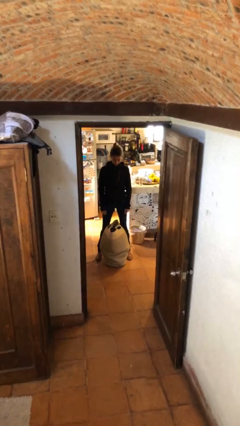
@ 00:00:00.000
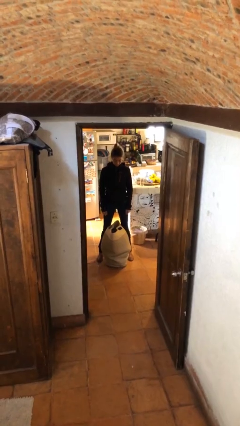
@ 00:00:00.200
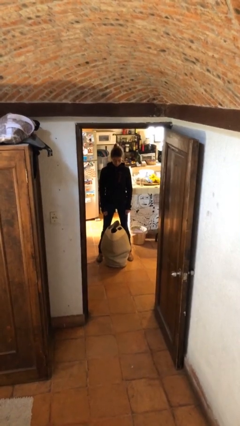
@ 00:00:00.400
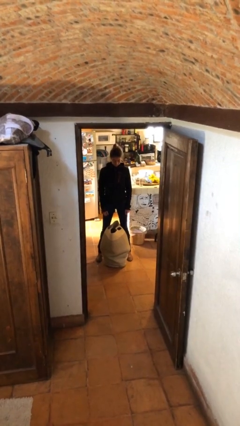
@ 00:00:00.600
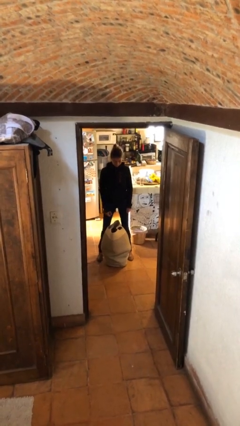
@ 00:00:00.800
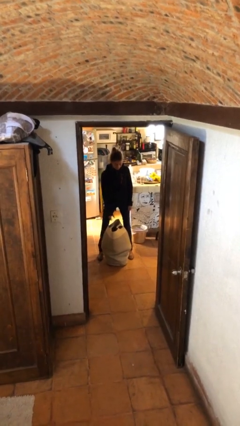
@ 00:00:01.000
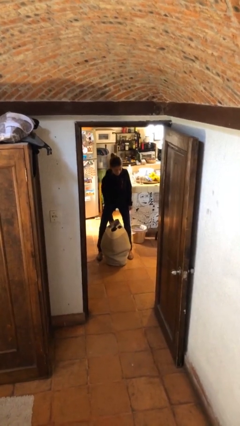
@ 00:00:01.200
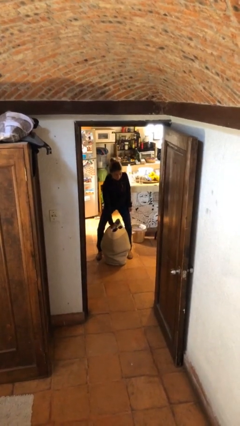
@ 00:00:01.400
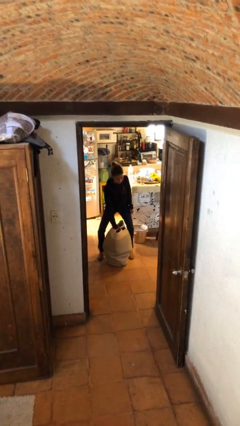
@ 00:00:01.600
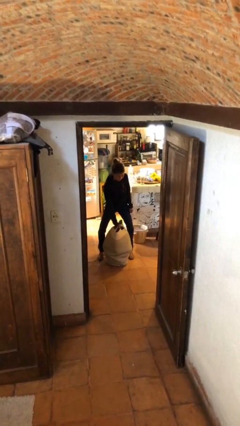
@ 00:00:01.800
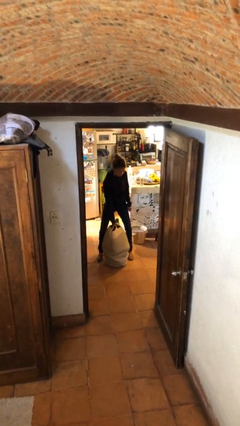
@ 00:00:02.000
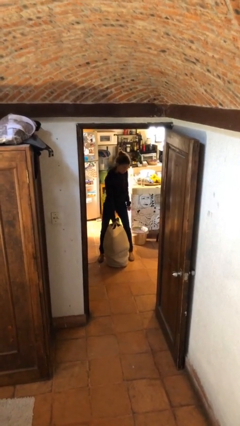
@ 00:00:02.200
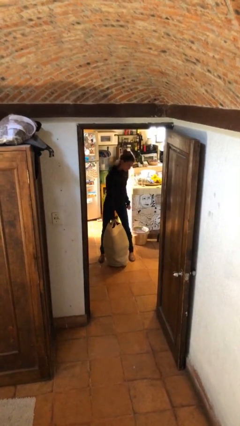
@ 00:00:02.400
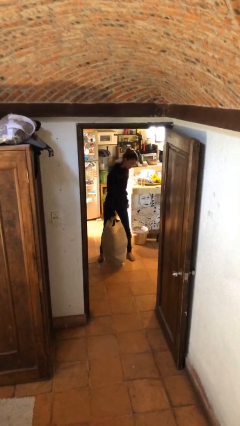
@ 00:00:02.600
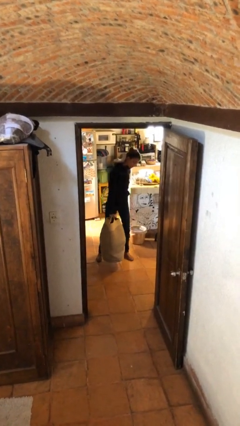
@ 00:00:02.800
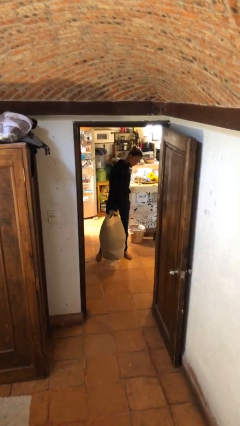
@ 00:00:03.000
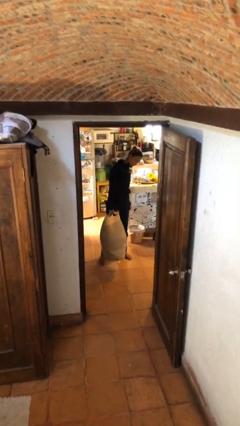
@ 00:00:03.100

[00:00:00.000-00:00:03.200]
person picks up object from floor

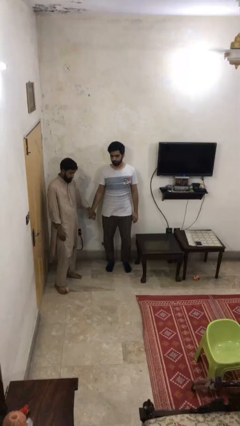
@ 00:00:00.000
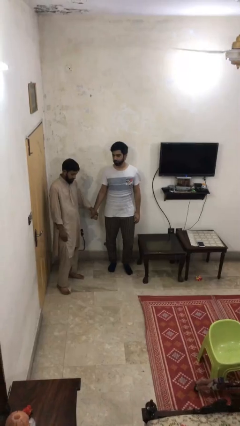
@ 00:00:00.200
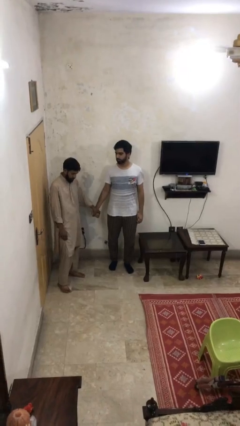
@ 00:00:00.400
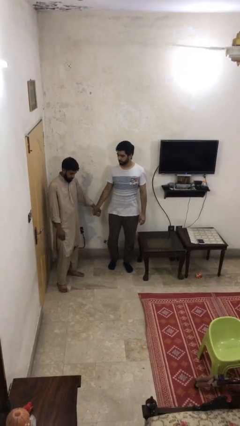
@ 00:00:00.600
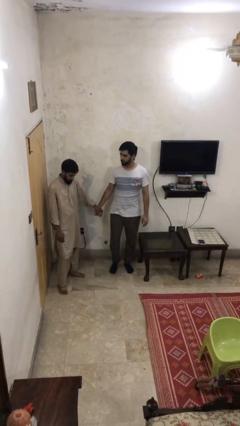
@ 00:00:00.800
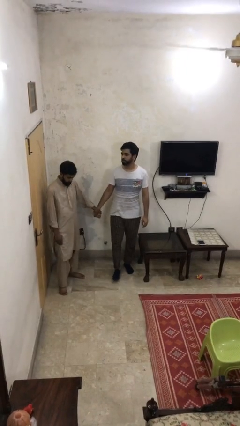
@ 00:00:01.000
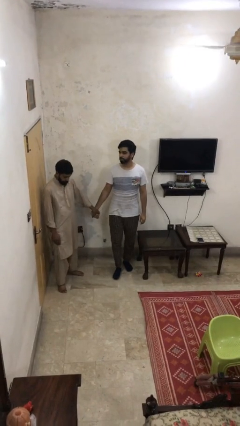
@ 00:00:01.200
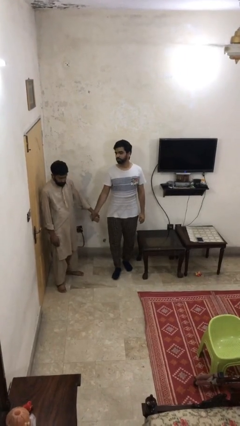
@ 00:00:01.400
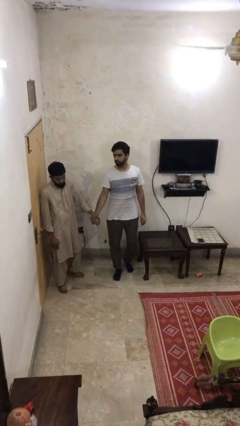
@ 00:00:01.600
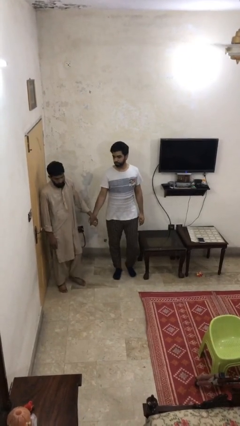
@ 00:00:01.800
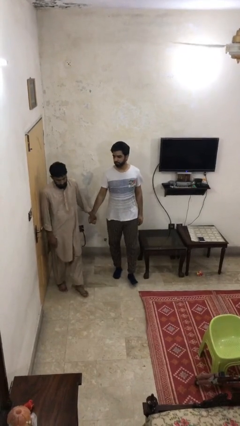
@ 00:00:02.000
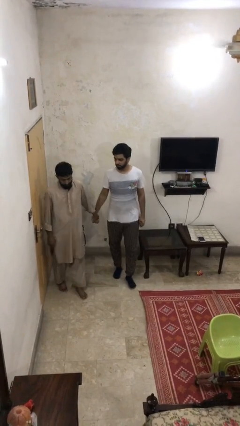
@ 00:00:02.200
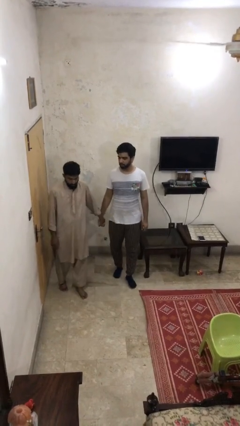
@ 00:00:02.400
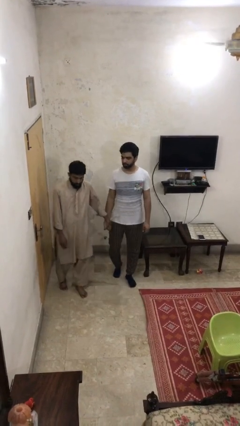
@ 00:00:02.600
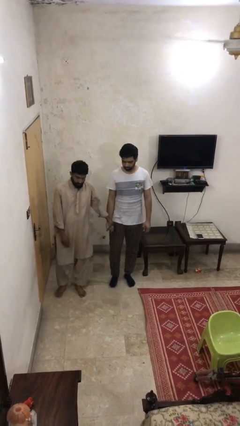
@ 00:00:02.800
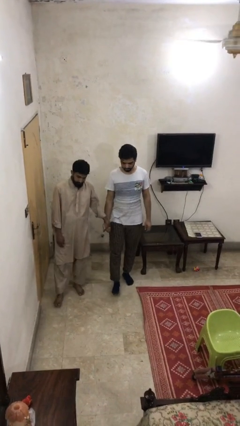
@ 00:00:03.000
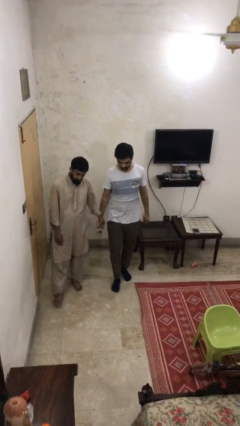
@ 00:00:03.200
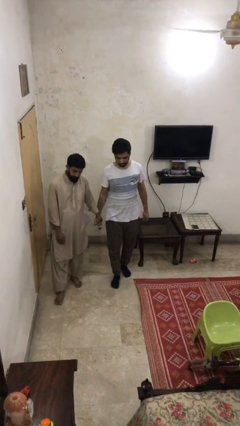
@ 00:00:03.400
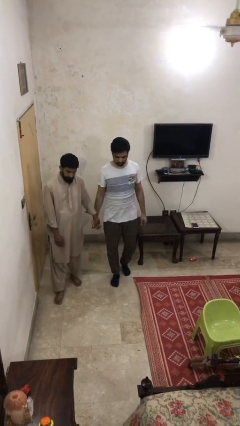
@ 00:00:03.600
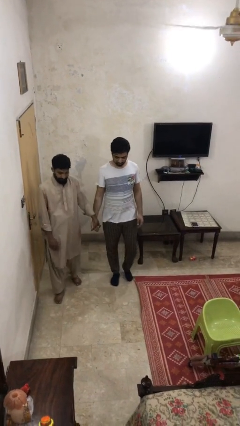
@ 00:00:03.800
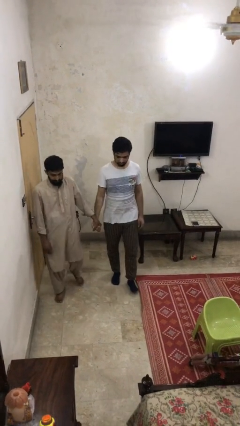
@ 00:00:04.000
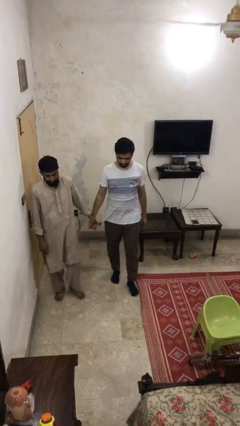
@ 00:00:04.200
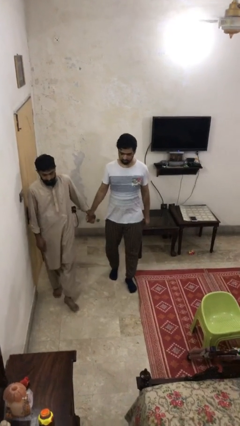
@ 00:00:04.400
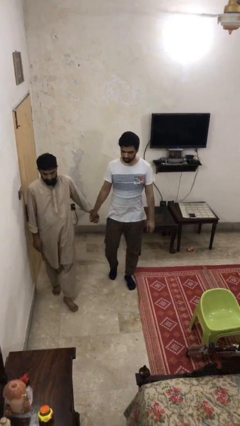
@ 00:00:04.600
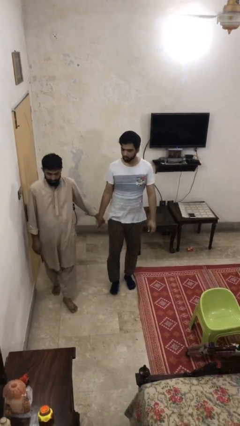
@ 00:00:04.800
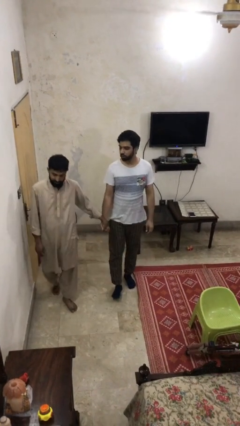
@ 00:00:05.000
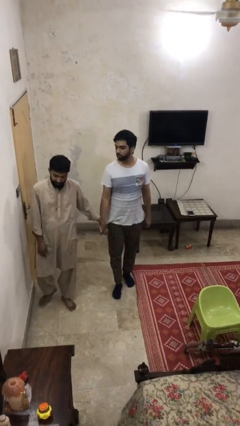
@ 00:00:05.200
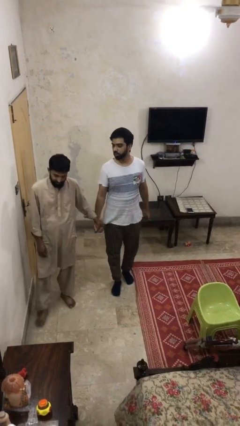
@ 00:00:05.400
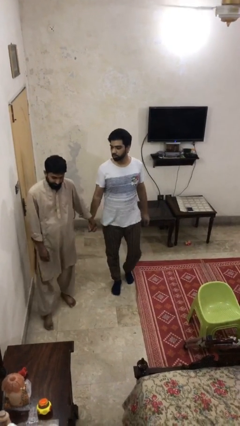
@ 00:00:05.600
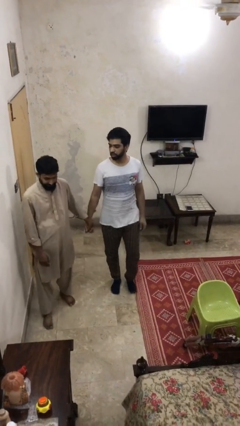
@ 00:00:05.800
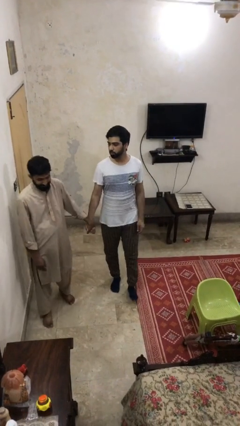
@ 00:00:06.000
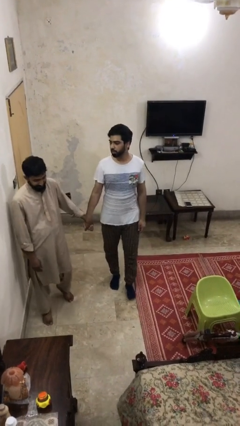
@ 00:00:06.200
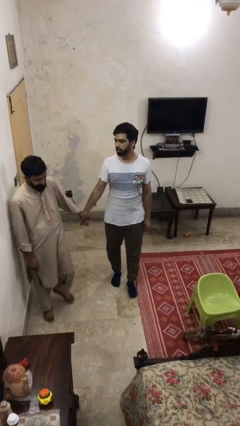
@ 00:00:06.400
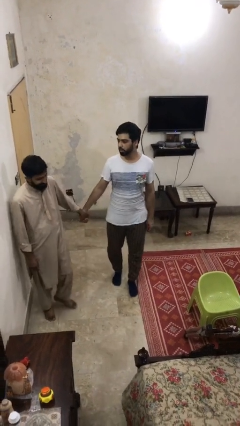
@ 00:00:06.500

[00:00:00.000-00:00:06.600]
person holds hand

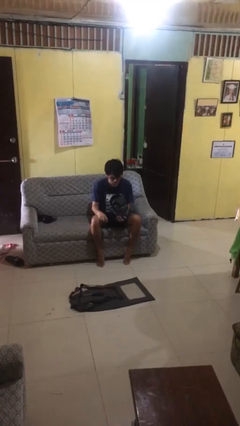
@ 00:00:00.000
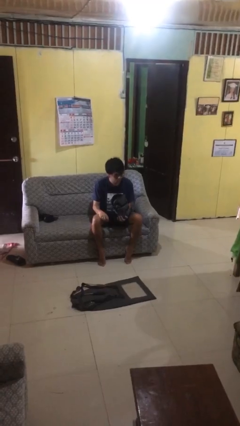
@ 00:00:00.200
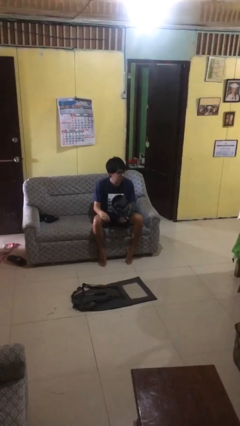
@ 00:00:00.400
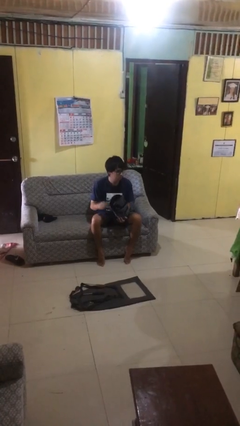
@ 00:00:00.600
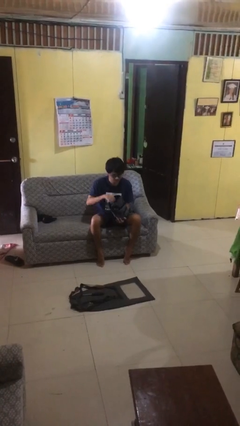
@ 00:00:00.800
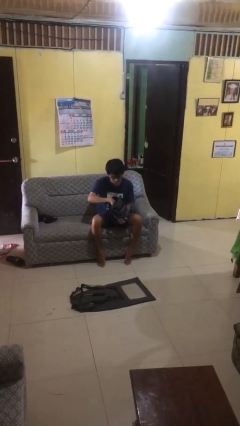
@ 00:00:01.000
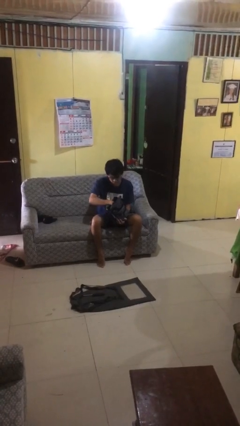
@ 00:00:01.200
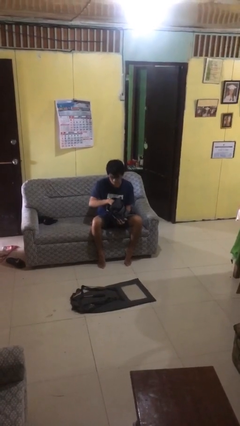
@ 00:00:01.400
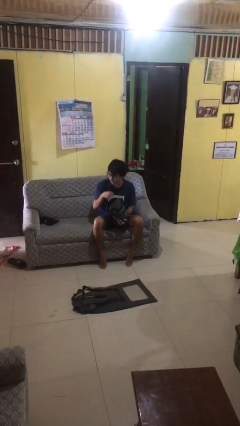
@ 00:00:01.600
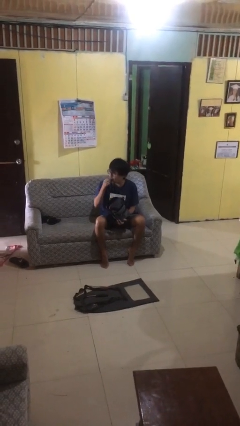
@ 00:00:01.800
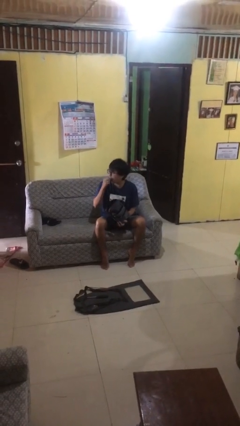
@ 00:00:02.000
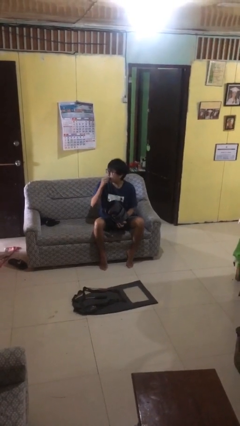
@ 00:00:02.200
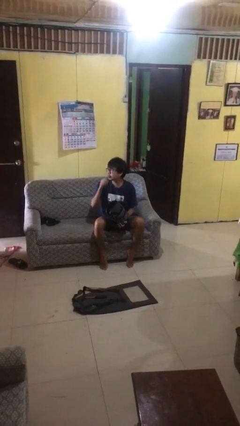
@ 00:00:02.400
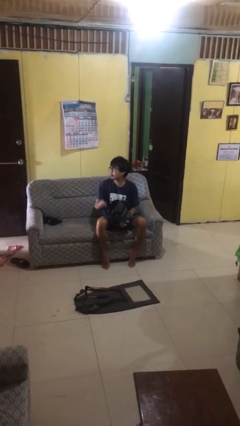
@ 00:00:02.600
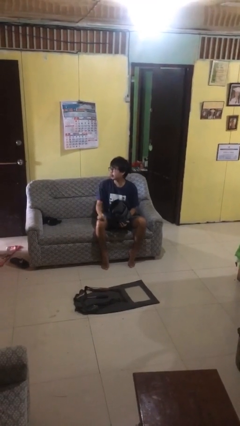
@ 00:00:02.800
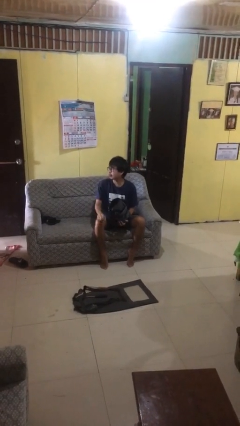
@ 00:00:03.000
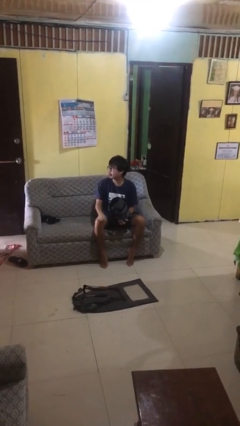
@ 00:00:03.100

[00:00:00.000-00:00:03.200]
person eats snack from bag

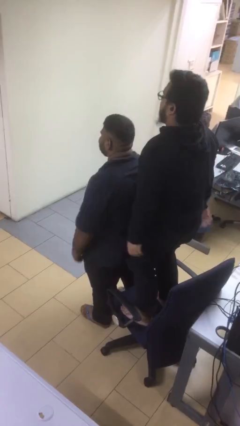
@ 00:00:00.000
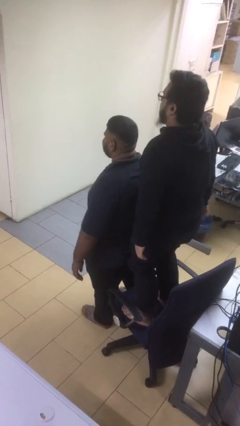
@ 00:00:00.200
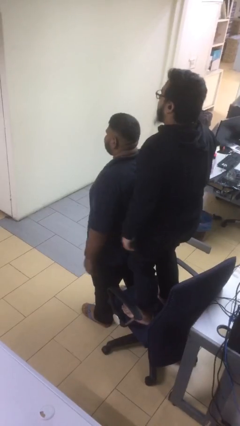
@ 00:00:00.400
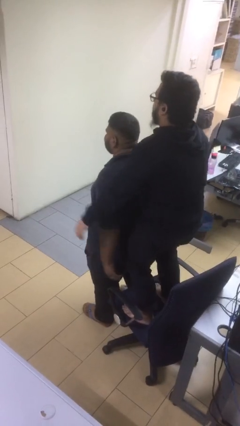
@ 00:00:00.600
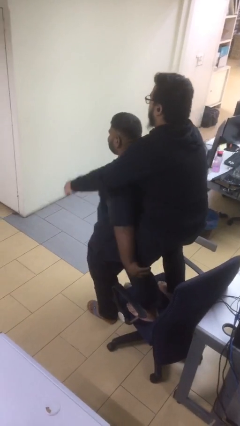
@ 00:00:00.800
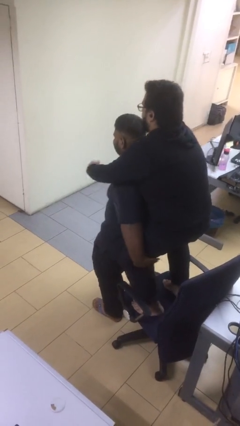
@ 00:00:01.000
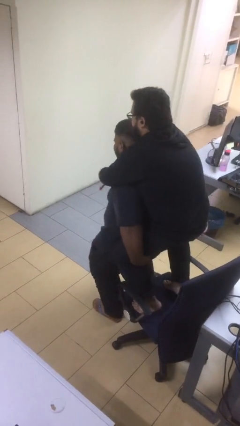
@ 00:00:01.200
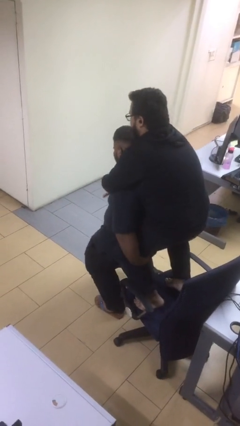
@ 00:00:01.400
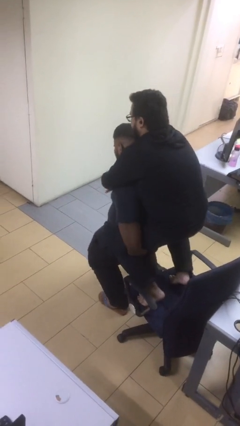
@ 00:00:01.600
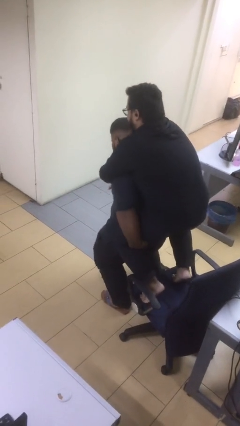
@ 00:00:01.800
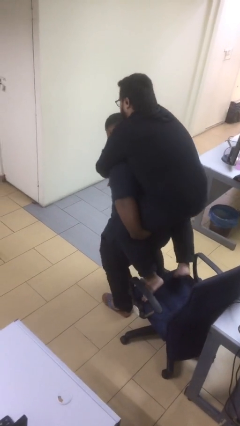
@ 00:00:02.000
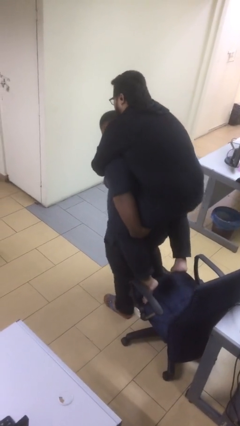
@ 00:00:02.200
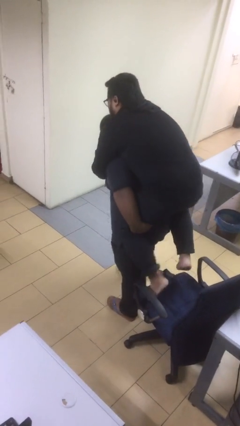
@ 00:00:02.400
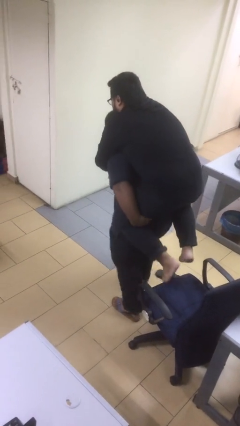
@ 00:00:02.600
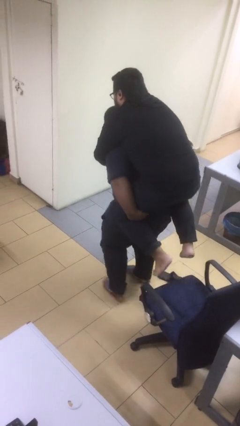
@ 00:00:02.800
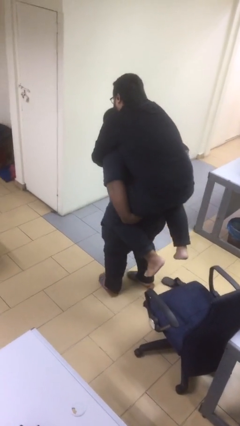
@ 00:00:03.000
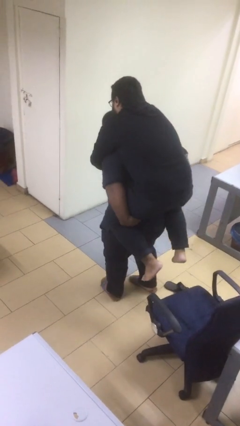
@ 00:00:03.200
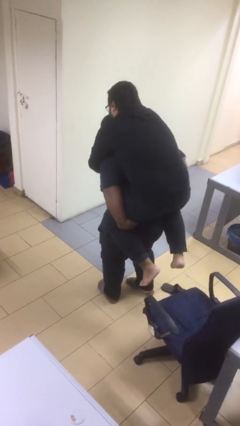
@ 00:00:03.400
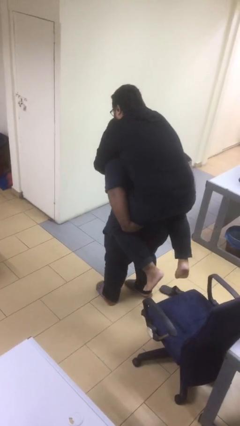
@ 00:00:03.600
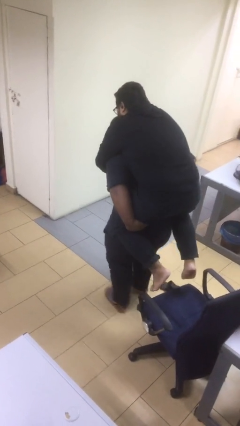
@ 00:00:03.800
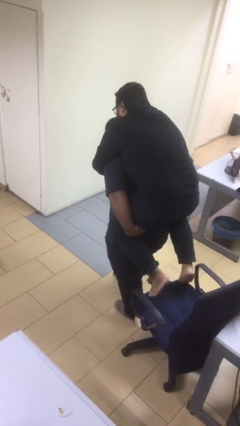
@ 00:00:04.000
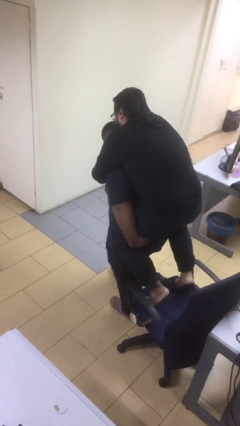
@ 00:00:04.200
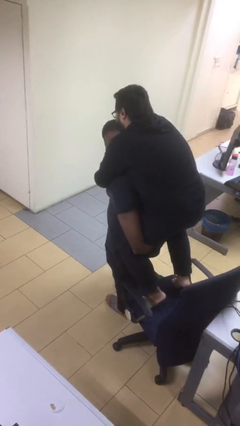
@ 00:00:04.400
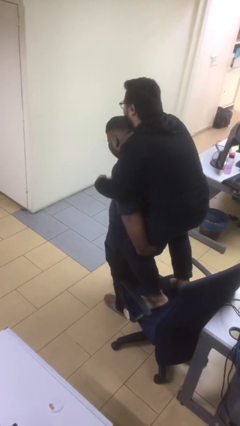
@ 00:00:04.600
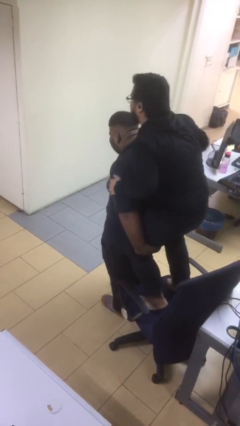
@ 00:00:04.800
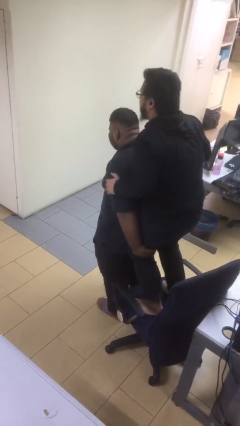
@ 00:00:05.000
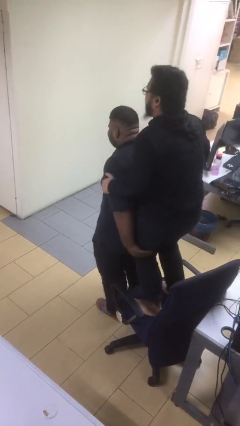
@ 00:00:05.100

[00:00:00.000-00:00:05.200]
person carries person on back
